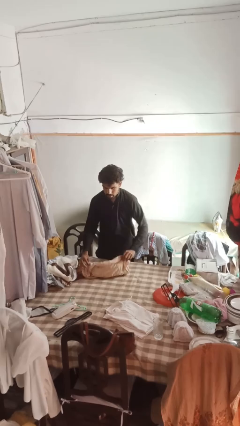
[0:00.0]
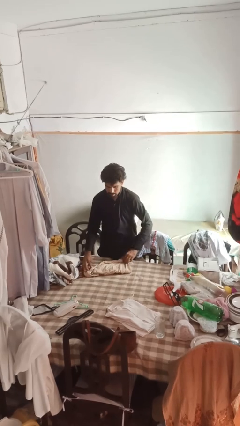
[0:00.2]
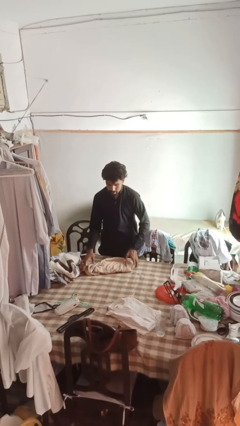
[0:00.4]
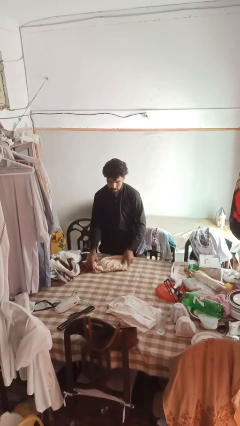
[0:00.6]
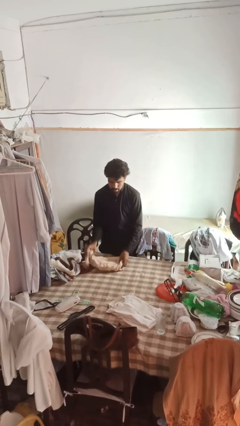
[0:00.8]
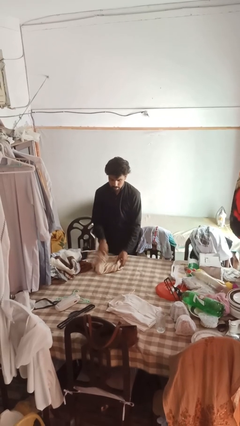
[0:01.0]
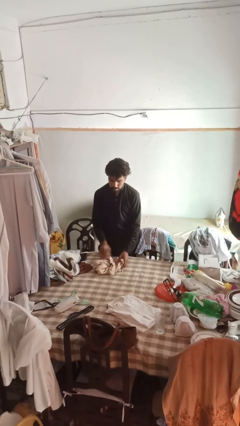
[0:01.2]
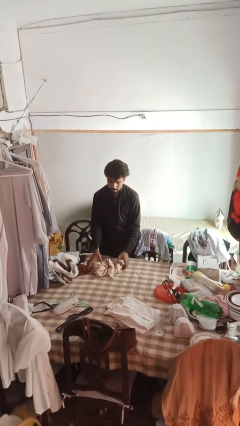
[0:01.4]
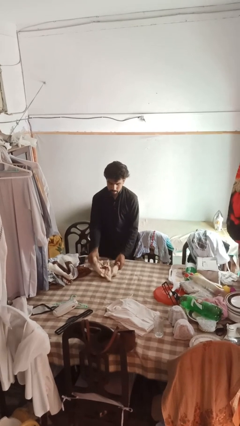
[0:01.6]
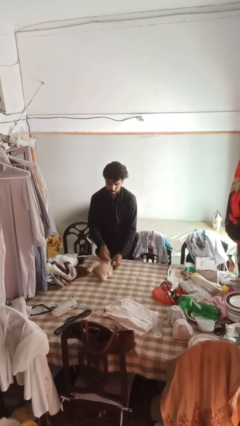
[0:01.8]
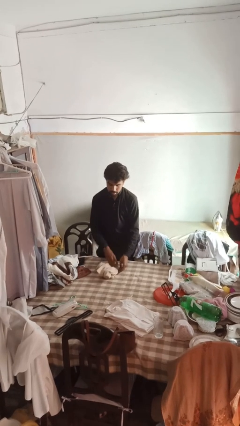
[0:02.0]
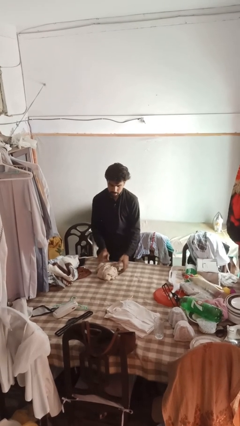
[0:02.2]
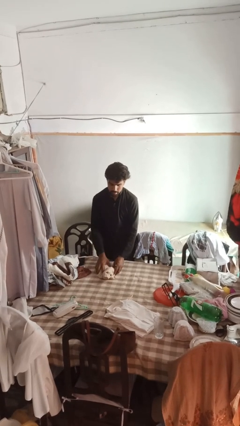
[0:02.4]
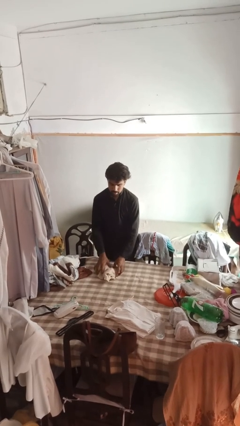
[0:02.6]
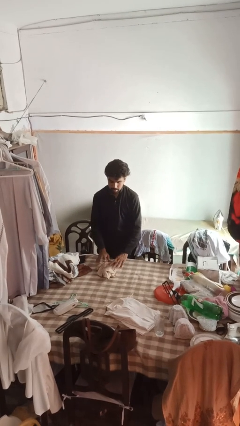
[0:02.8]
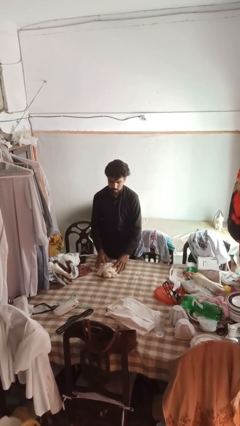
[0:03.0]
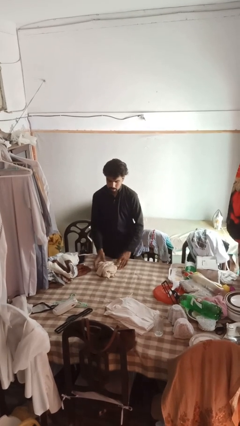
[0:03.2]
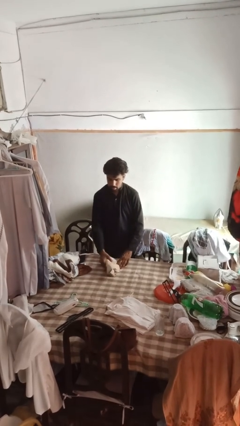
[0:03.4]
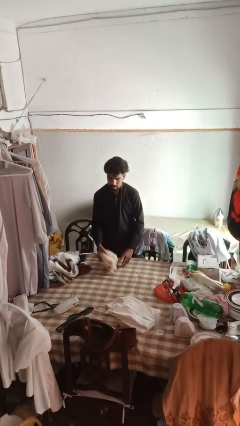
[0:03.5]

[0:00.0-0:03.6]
person folds shirt

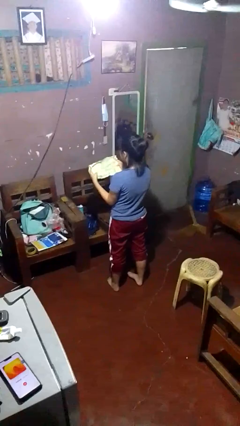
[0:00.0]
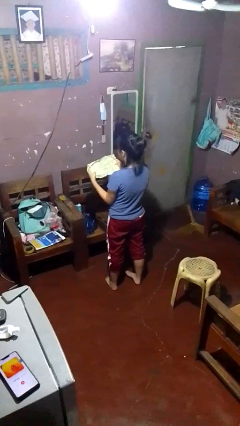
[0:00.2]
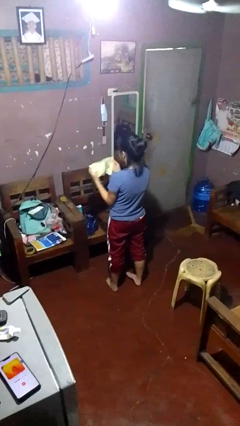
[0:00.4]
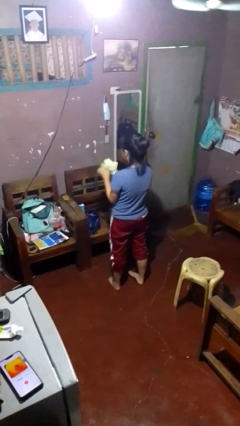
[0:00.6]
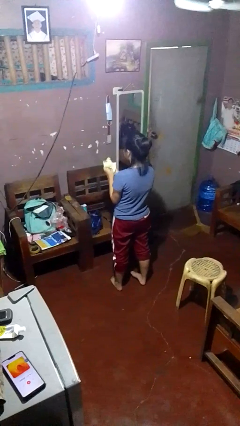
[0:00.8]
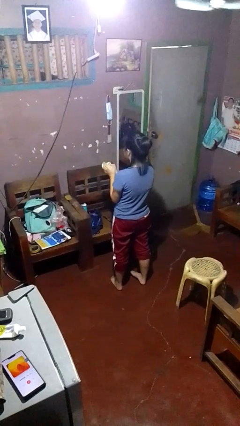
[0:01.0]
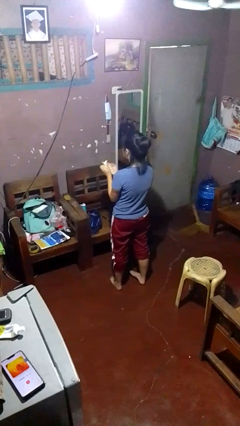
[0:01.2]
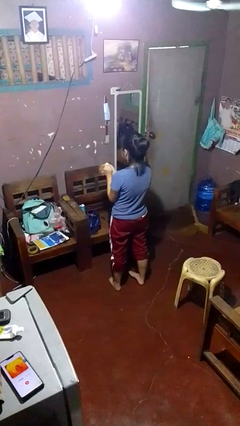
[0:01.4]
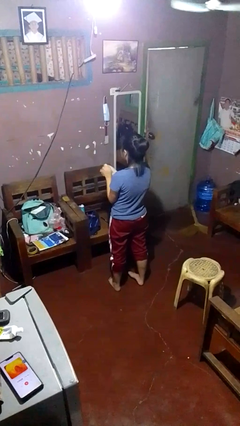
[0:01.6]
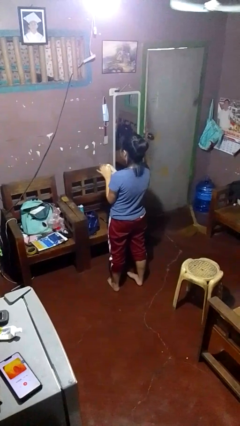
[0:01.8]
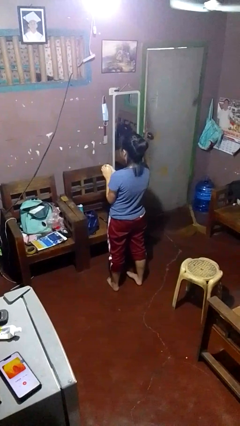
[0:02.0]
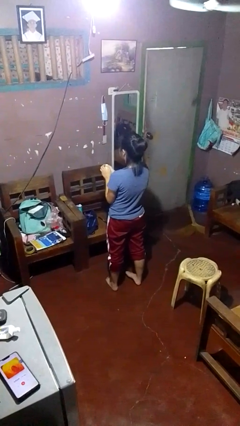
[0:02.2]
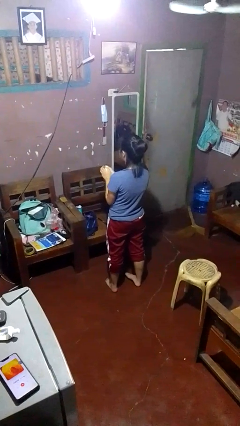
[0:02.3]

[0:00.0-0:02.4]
person crumples paper

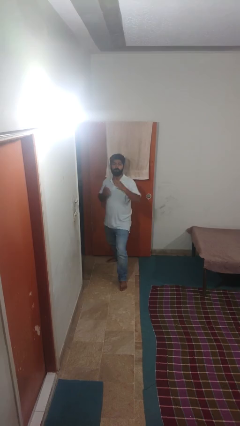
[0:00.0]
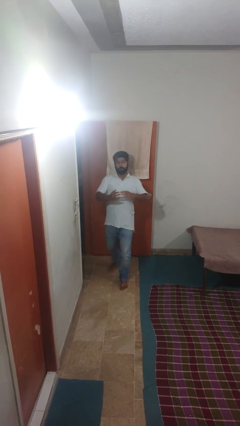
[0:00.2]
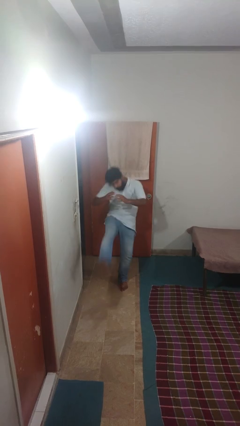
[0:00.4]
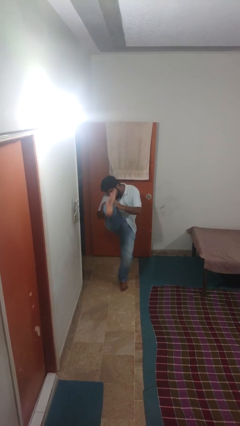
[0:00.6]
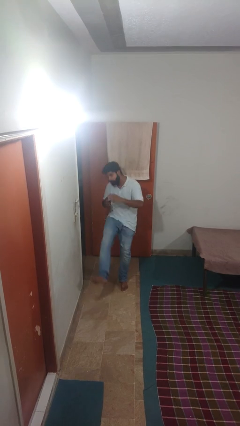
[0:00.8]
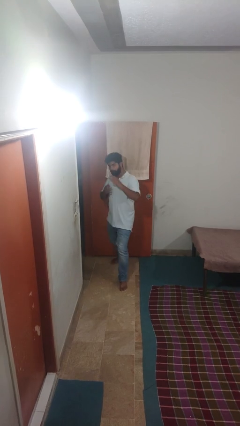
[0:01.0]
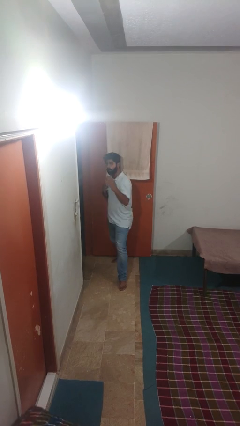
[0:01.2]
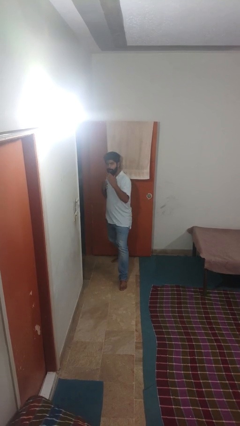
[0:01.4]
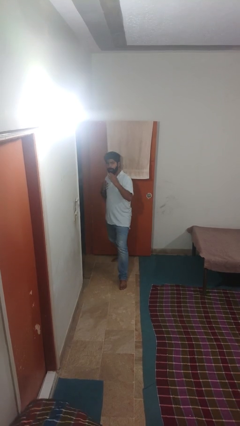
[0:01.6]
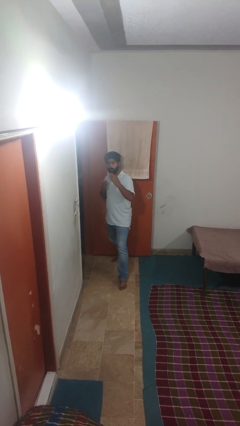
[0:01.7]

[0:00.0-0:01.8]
person karate kicks

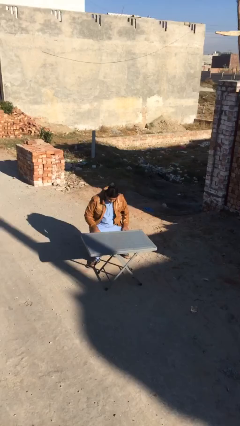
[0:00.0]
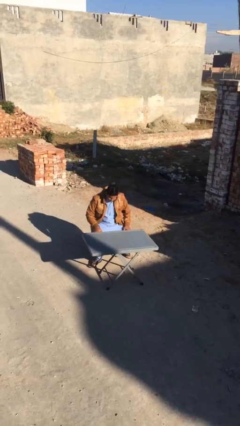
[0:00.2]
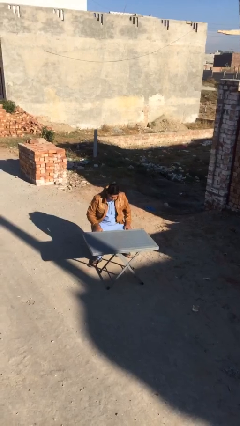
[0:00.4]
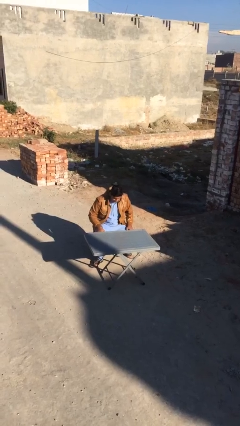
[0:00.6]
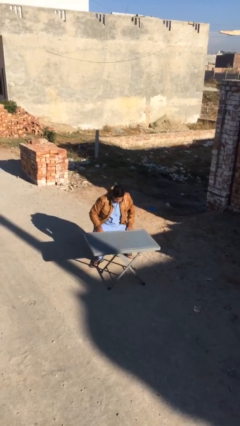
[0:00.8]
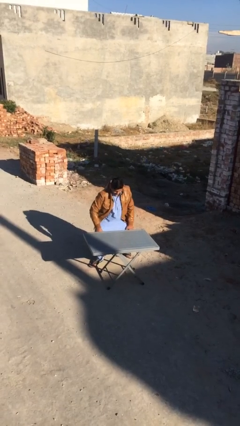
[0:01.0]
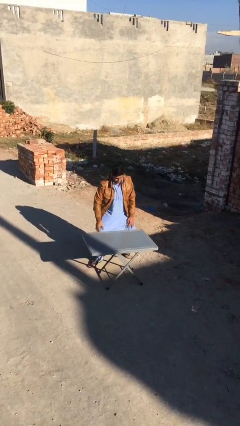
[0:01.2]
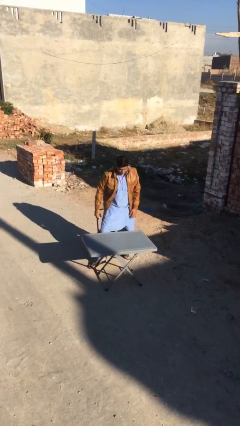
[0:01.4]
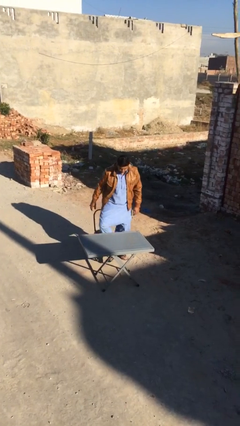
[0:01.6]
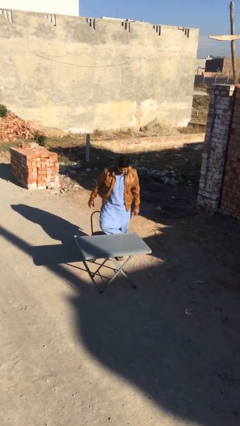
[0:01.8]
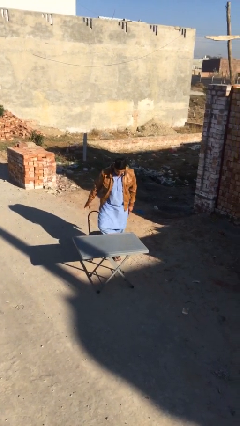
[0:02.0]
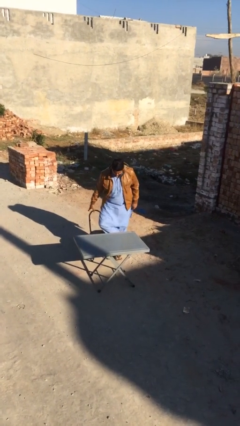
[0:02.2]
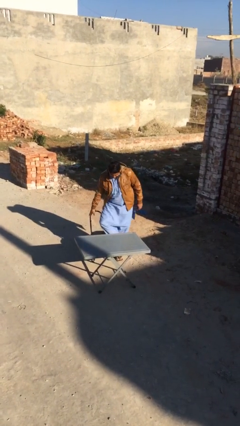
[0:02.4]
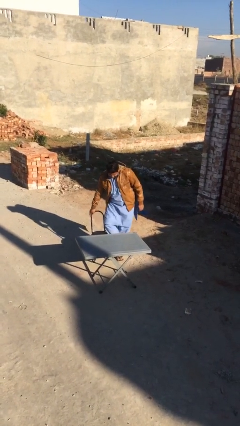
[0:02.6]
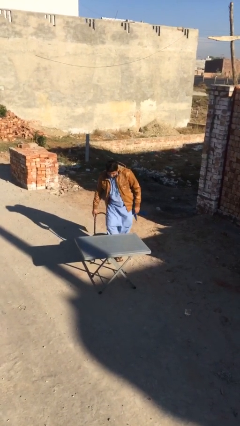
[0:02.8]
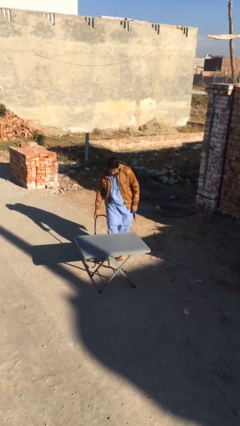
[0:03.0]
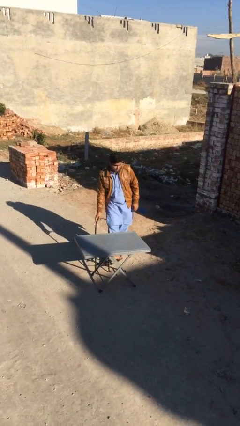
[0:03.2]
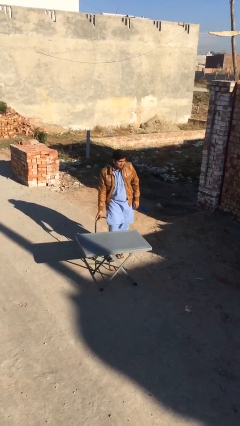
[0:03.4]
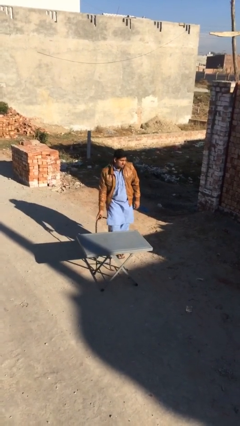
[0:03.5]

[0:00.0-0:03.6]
person stands up

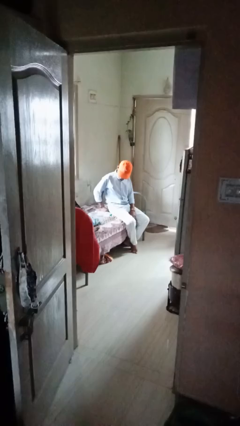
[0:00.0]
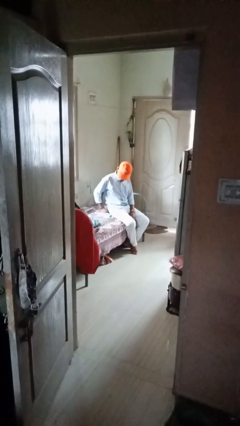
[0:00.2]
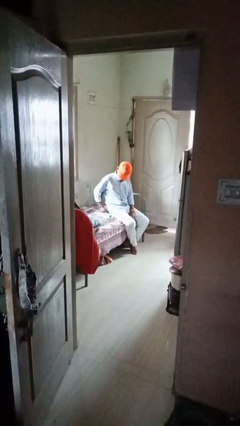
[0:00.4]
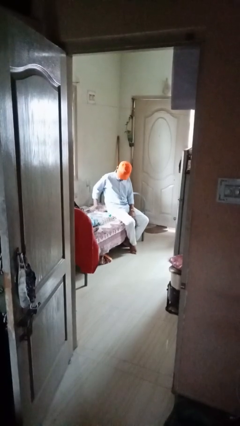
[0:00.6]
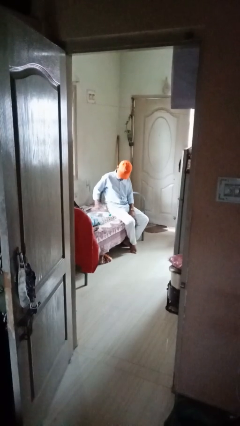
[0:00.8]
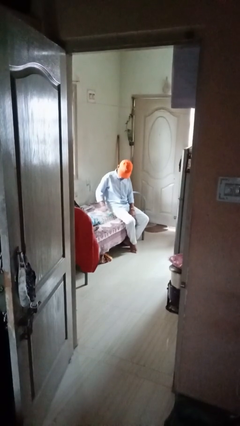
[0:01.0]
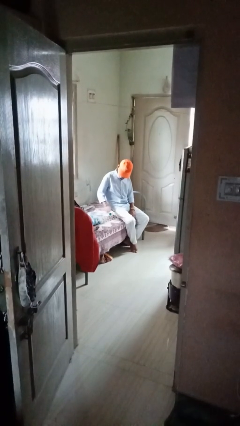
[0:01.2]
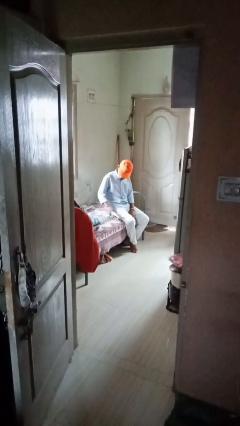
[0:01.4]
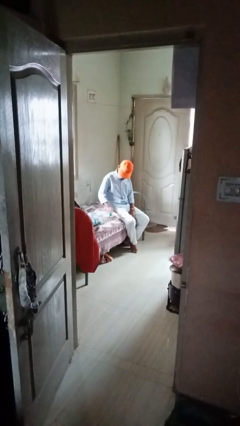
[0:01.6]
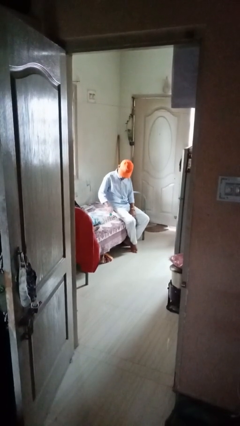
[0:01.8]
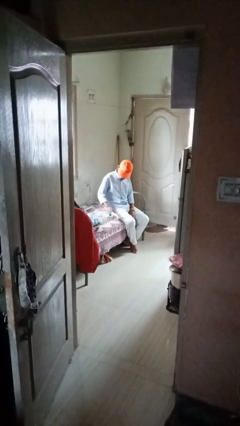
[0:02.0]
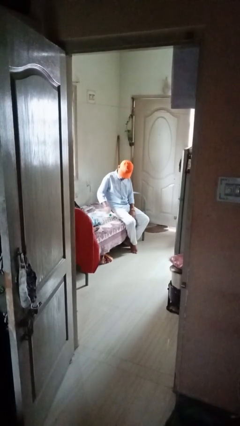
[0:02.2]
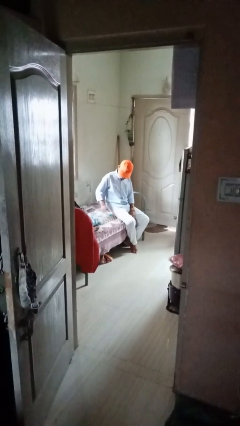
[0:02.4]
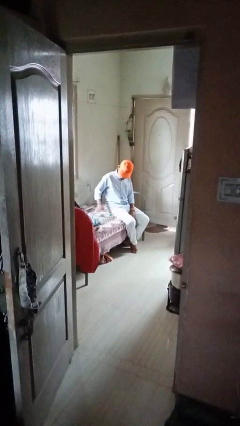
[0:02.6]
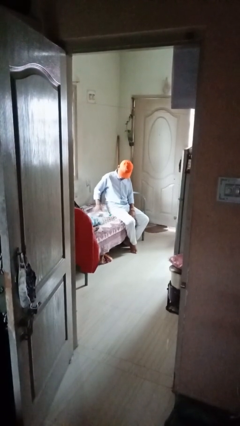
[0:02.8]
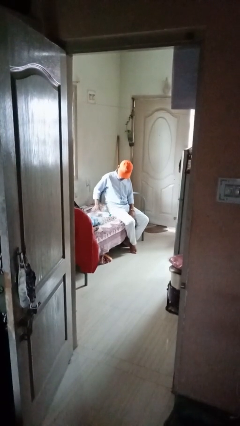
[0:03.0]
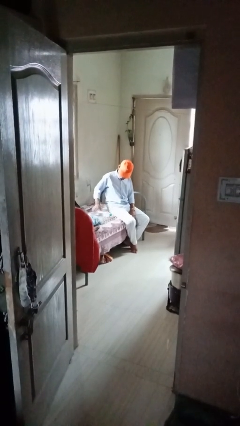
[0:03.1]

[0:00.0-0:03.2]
person waves hand over object

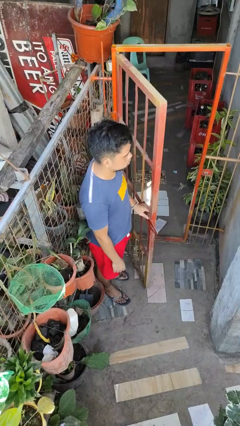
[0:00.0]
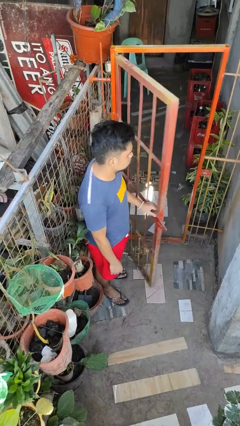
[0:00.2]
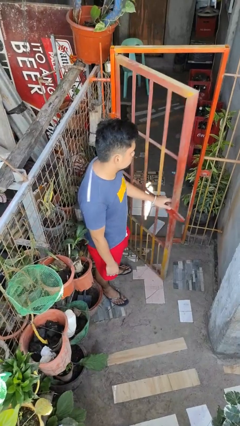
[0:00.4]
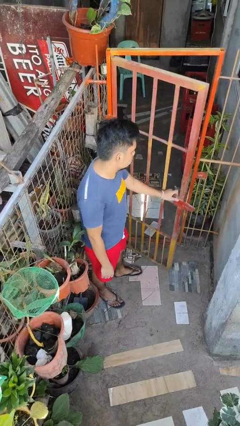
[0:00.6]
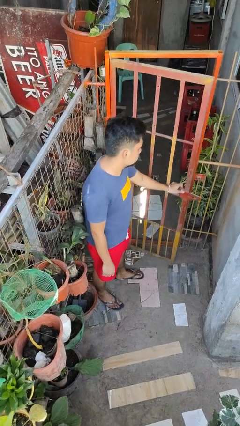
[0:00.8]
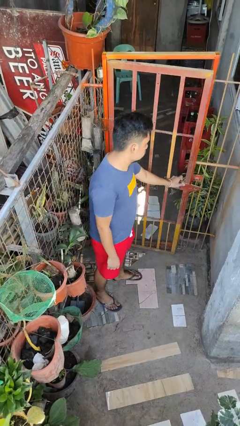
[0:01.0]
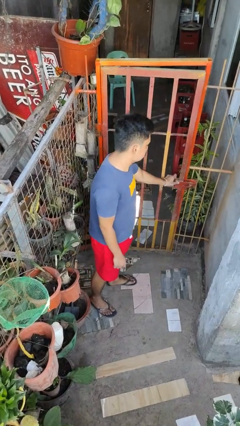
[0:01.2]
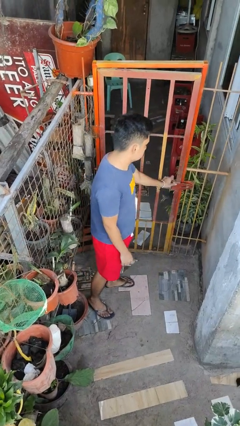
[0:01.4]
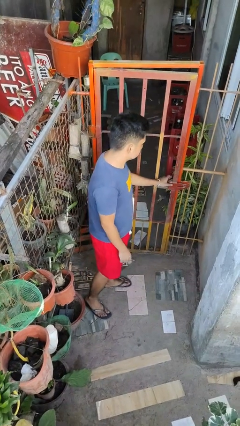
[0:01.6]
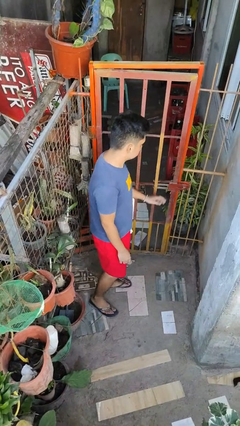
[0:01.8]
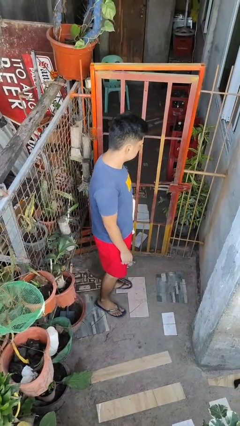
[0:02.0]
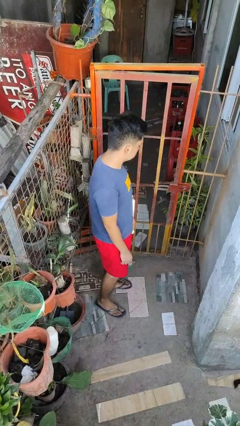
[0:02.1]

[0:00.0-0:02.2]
person closes gate

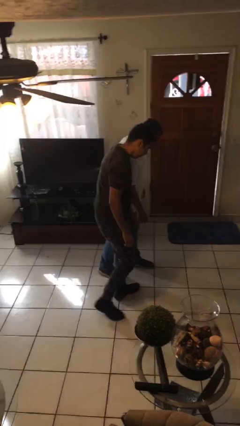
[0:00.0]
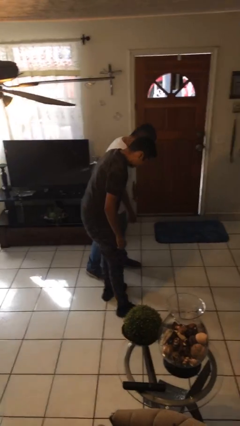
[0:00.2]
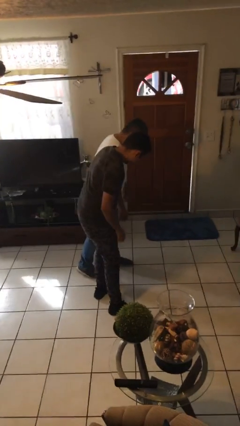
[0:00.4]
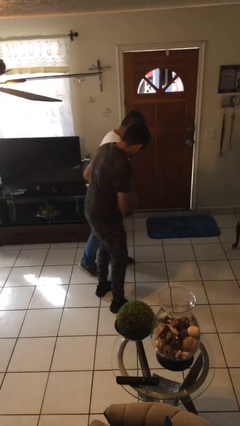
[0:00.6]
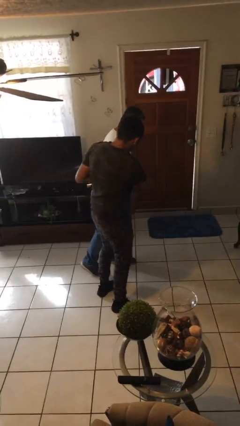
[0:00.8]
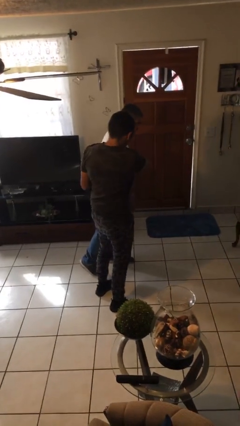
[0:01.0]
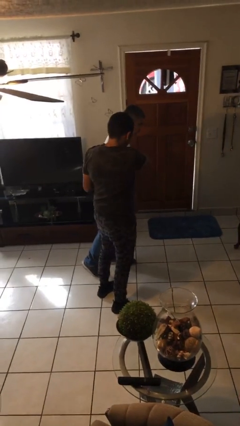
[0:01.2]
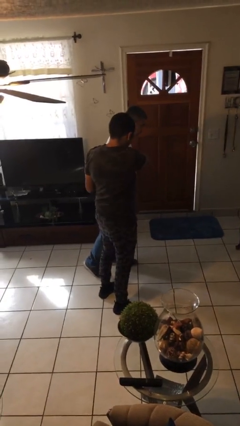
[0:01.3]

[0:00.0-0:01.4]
person bumps into person
